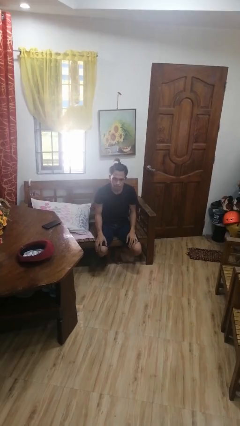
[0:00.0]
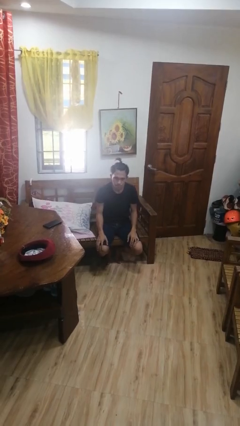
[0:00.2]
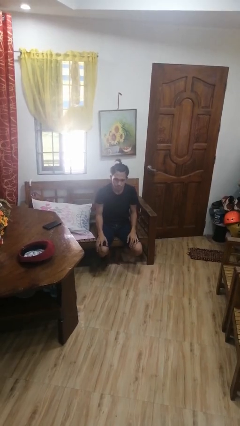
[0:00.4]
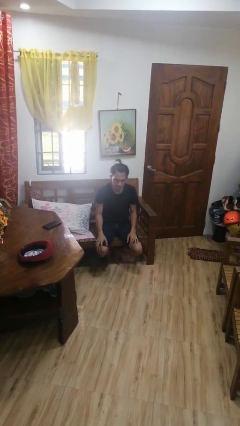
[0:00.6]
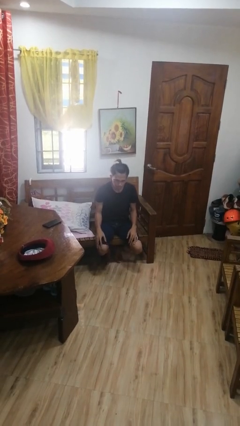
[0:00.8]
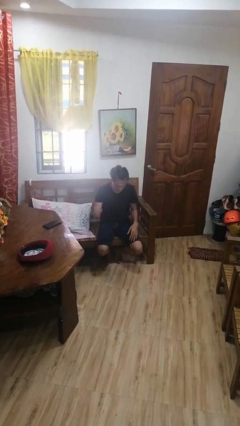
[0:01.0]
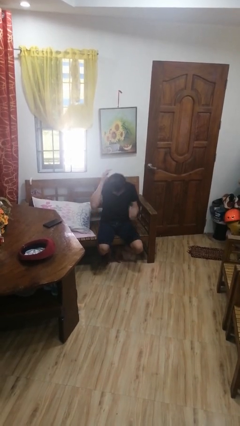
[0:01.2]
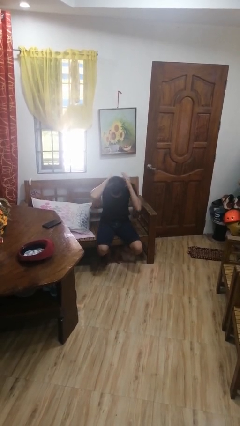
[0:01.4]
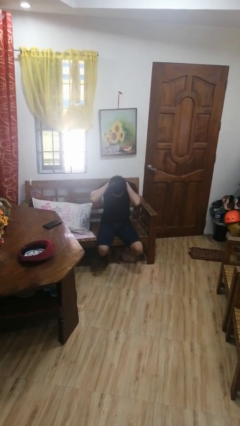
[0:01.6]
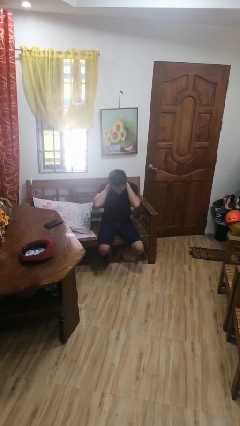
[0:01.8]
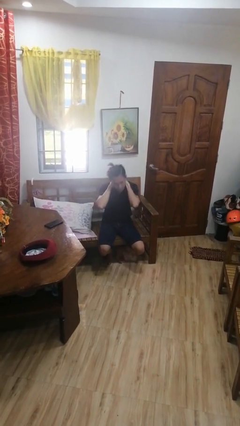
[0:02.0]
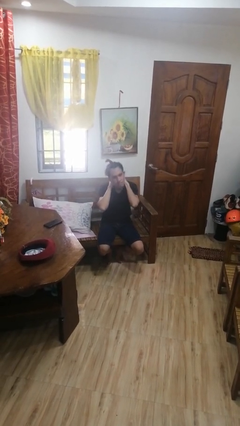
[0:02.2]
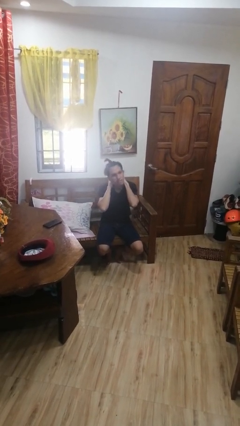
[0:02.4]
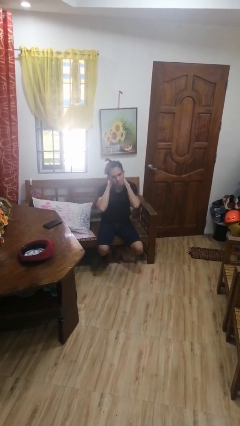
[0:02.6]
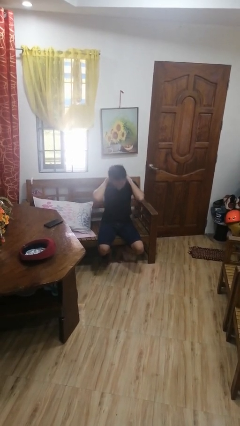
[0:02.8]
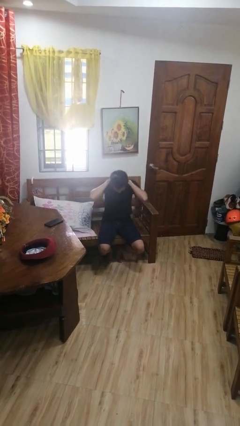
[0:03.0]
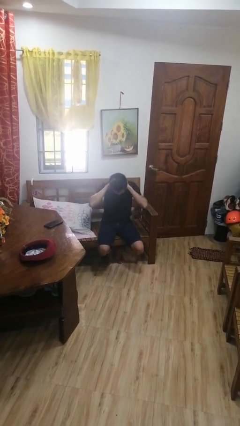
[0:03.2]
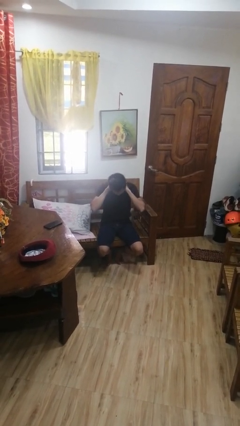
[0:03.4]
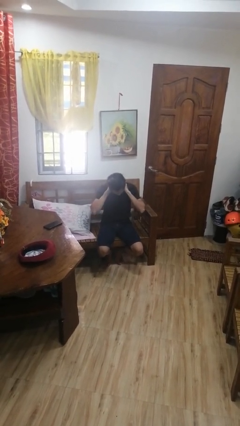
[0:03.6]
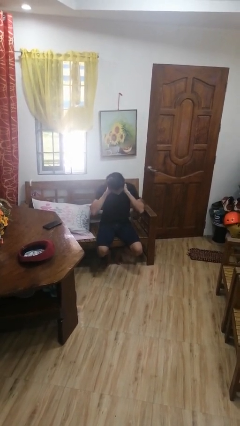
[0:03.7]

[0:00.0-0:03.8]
person rubs neck

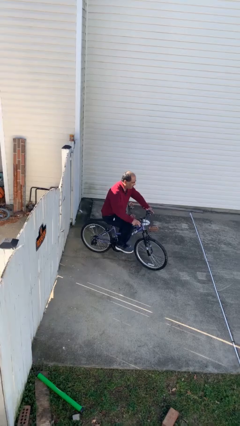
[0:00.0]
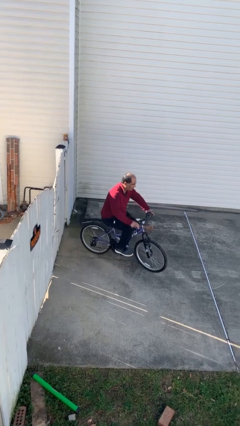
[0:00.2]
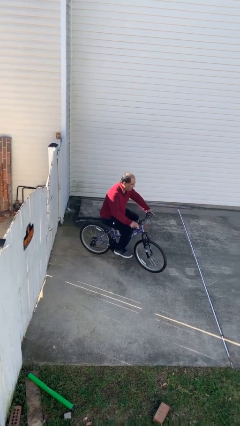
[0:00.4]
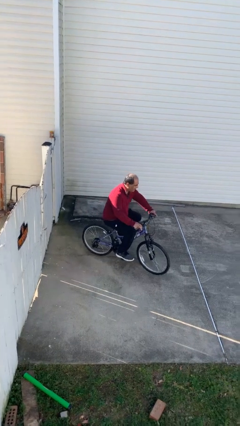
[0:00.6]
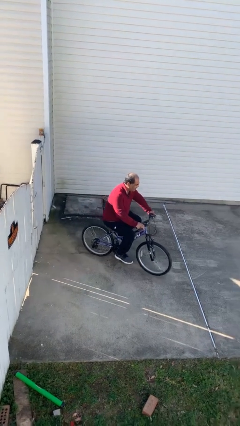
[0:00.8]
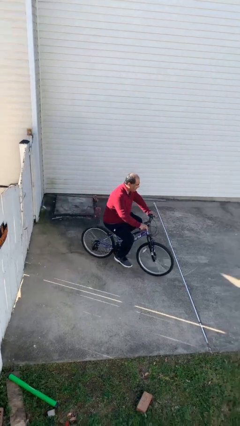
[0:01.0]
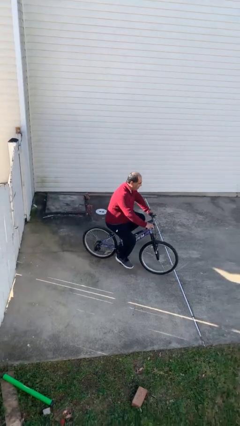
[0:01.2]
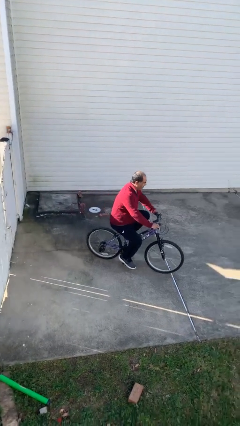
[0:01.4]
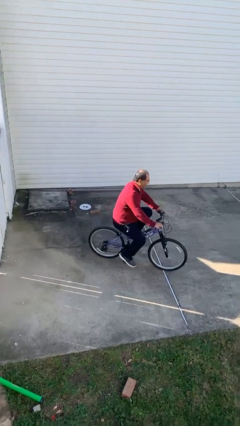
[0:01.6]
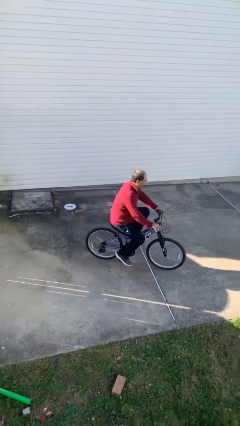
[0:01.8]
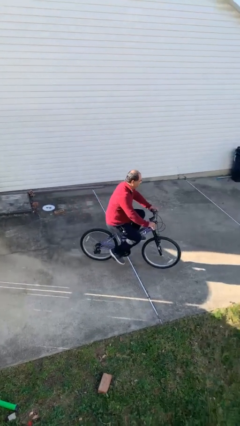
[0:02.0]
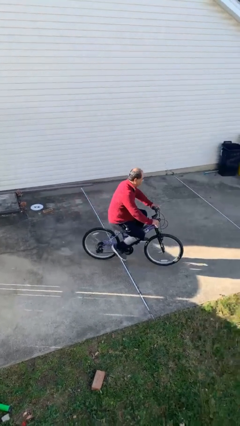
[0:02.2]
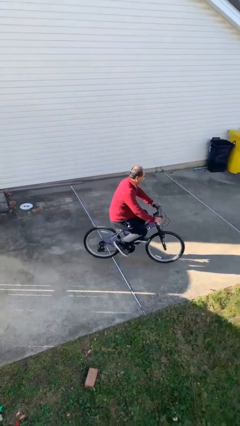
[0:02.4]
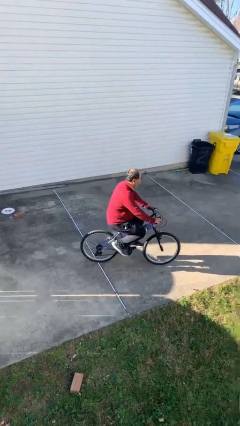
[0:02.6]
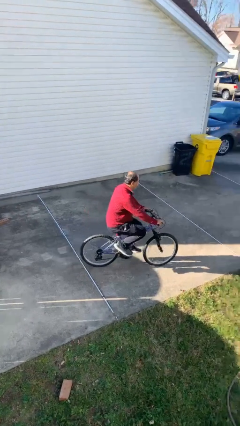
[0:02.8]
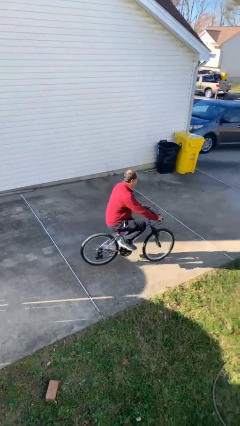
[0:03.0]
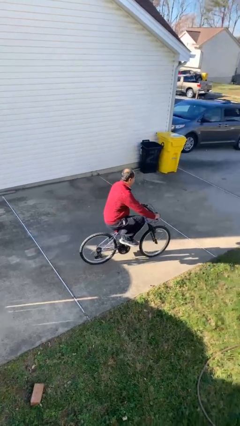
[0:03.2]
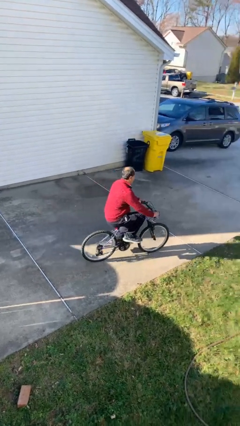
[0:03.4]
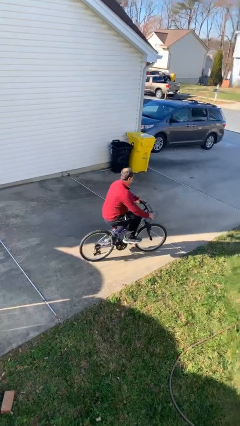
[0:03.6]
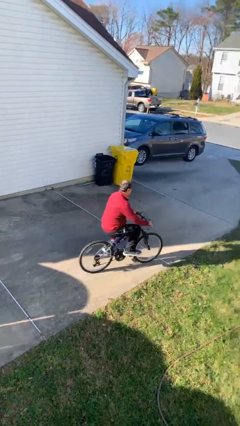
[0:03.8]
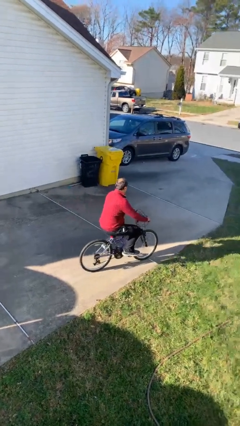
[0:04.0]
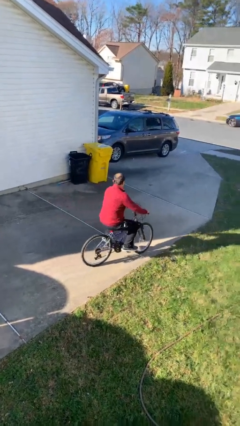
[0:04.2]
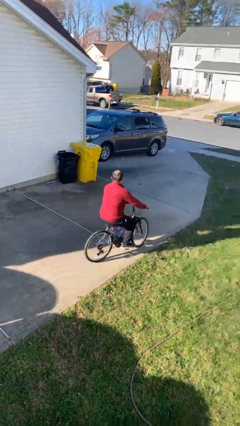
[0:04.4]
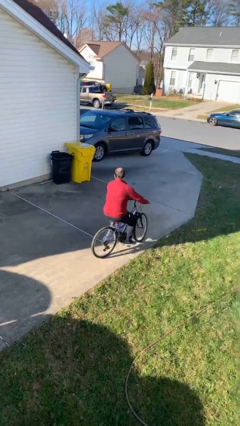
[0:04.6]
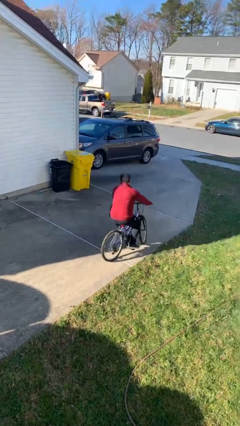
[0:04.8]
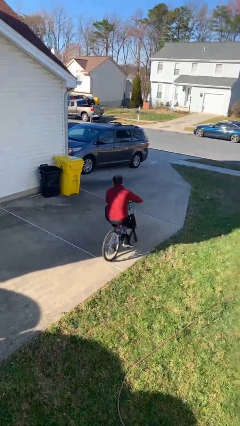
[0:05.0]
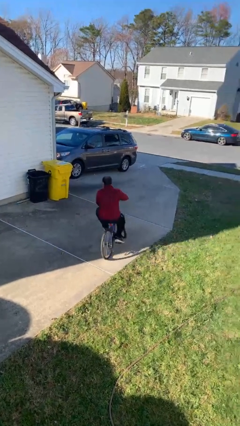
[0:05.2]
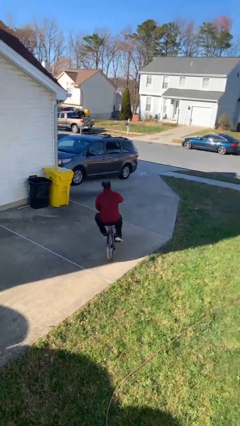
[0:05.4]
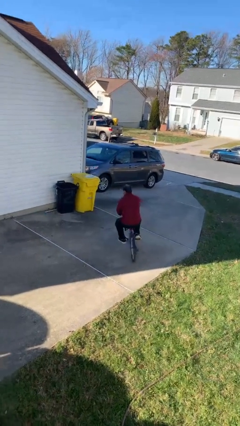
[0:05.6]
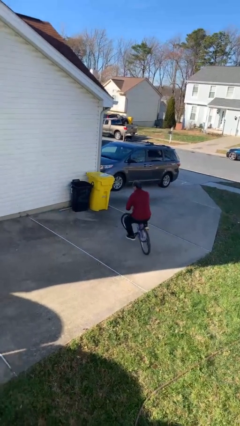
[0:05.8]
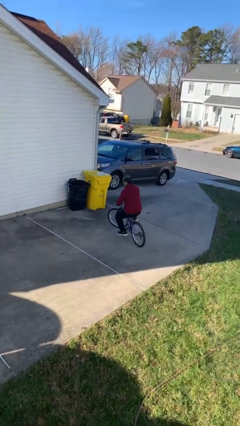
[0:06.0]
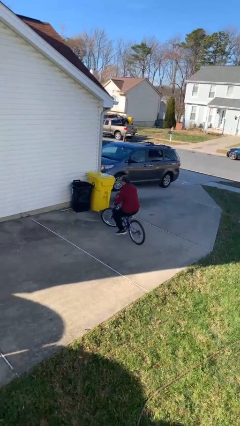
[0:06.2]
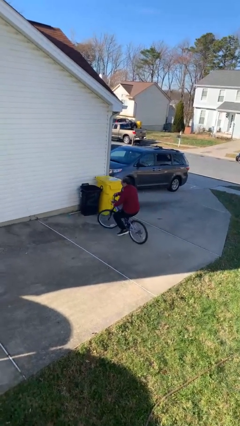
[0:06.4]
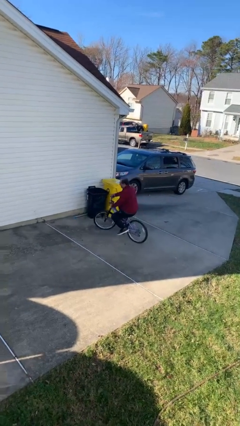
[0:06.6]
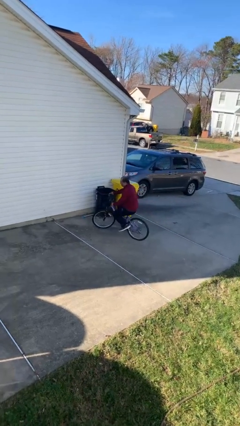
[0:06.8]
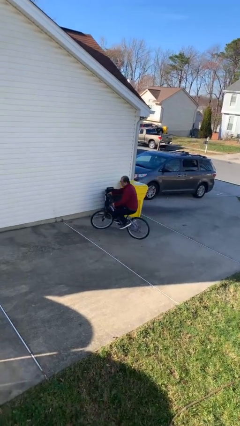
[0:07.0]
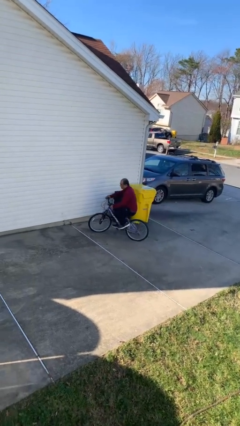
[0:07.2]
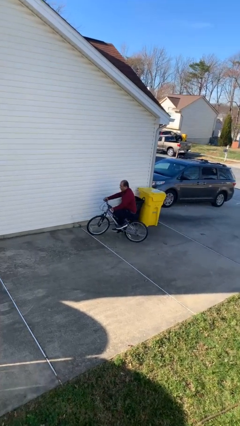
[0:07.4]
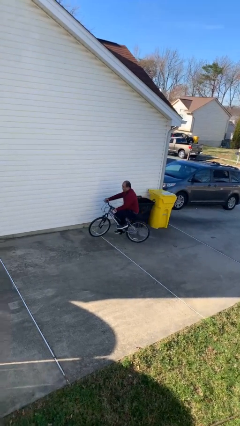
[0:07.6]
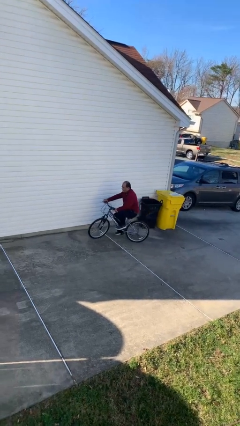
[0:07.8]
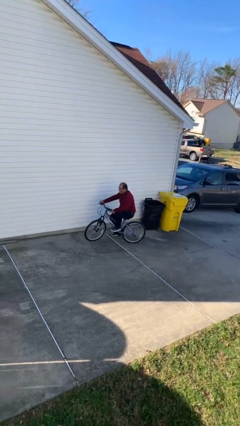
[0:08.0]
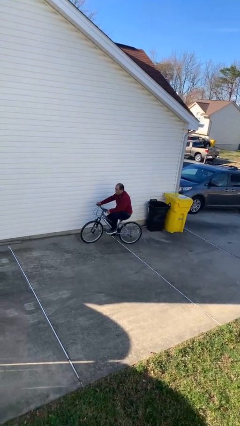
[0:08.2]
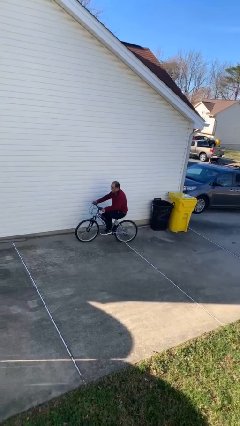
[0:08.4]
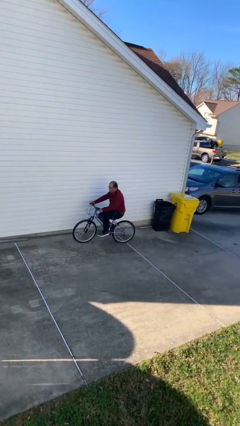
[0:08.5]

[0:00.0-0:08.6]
person rides bicycle

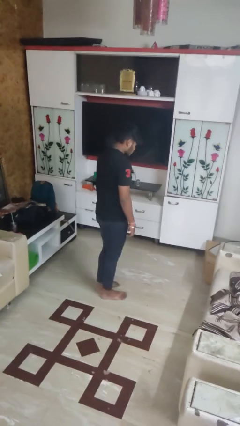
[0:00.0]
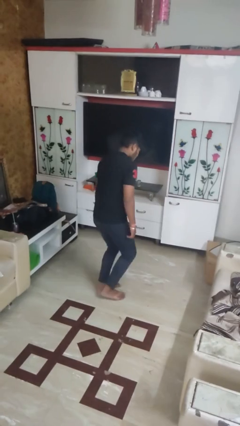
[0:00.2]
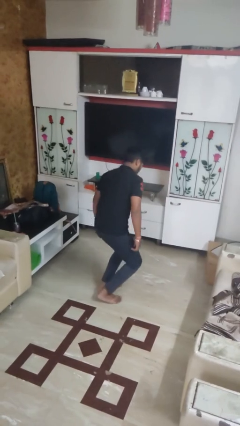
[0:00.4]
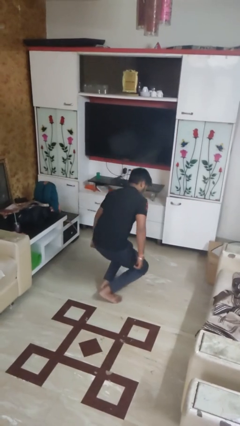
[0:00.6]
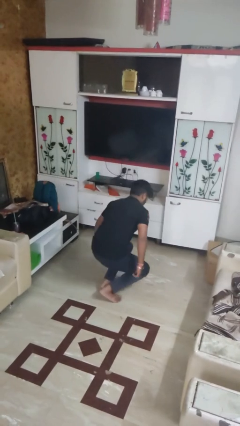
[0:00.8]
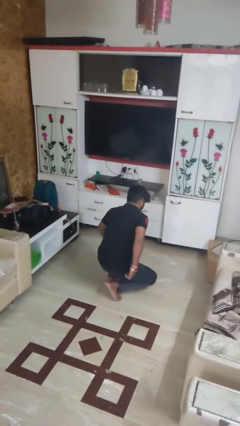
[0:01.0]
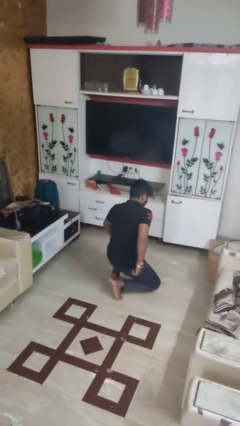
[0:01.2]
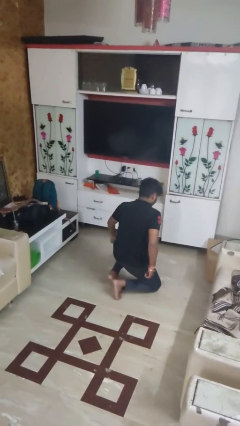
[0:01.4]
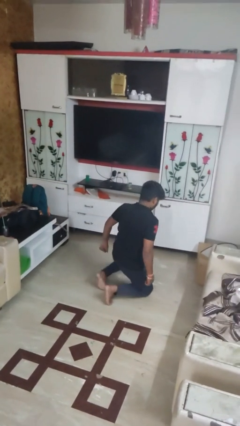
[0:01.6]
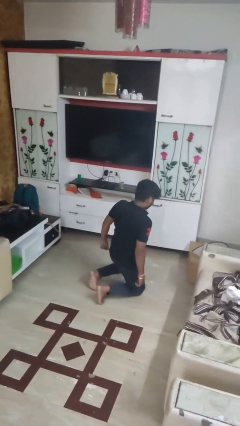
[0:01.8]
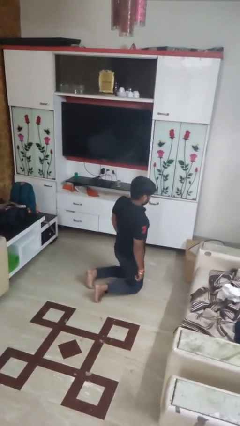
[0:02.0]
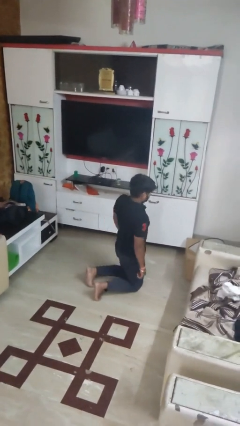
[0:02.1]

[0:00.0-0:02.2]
person kneels

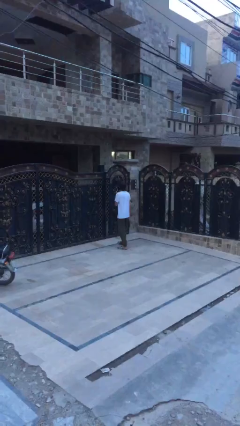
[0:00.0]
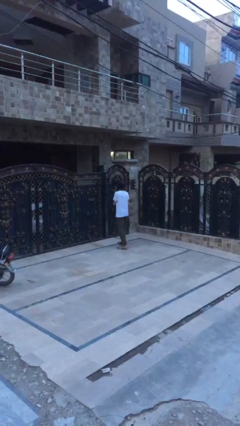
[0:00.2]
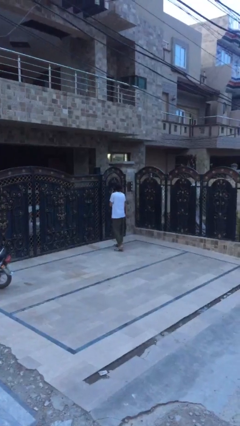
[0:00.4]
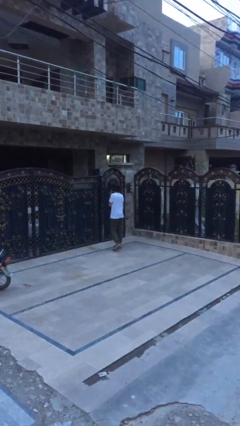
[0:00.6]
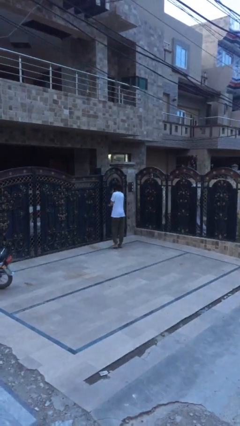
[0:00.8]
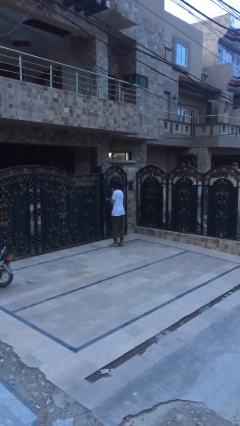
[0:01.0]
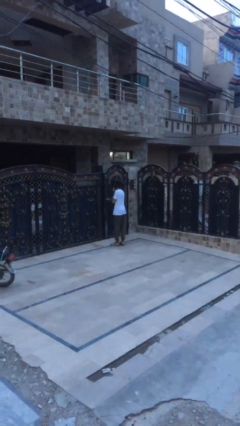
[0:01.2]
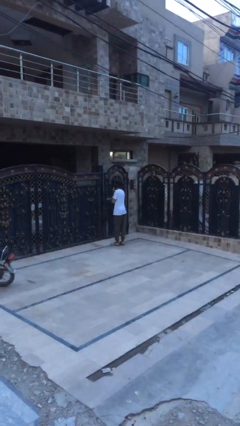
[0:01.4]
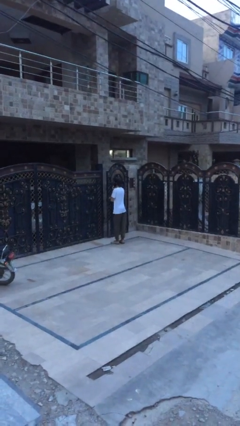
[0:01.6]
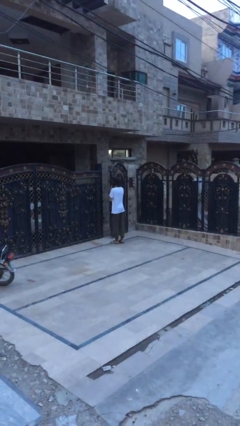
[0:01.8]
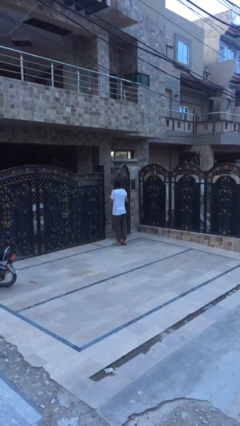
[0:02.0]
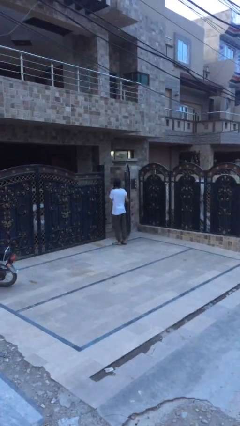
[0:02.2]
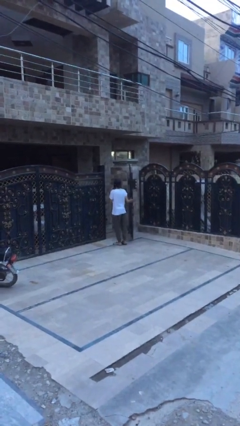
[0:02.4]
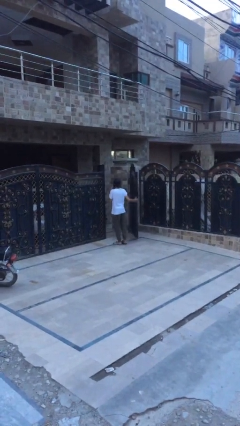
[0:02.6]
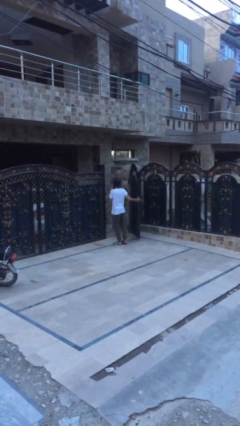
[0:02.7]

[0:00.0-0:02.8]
person opens facility door
